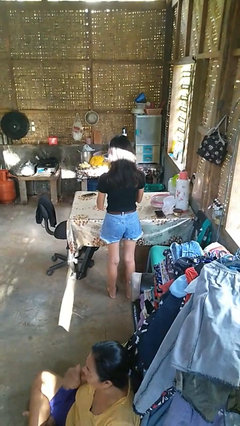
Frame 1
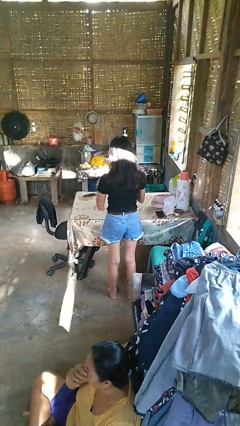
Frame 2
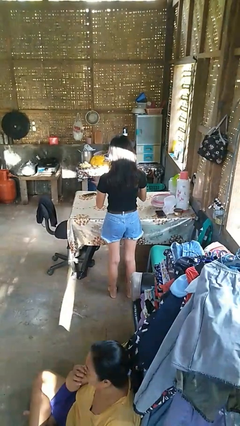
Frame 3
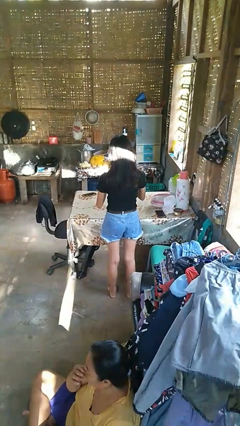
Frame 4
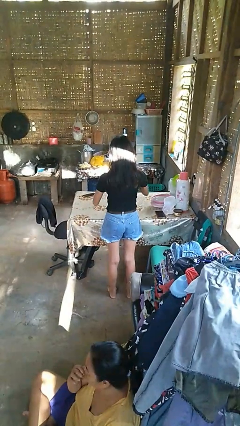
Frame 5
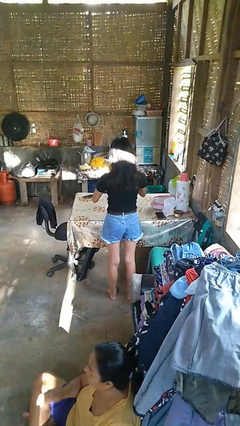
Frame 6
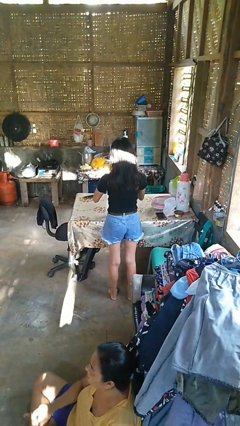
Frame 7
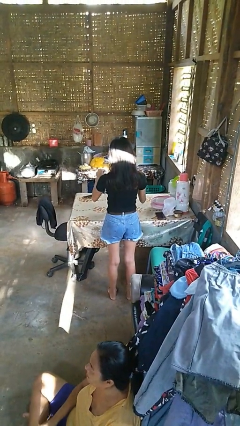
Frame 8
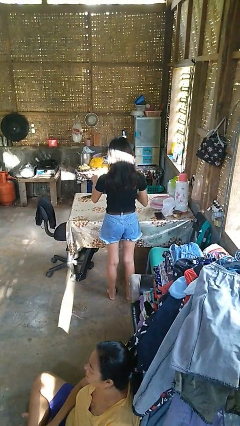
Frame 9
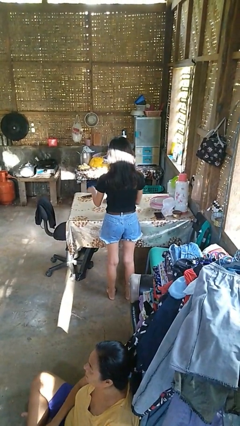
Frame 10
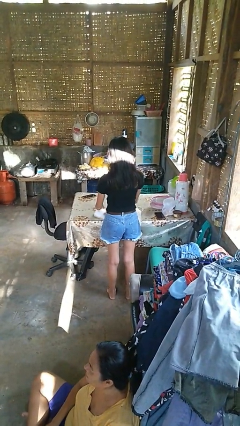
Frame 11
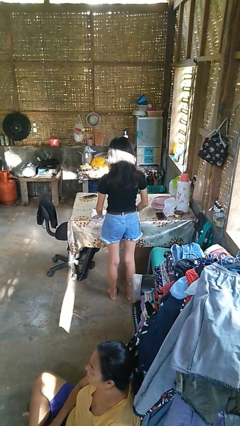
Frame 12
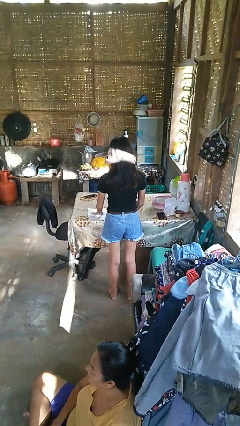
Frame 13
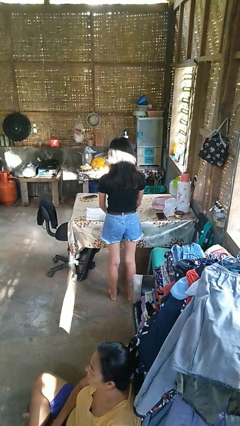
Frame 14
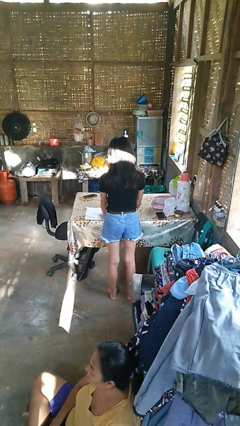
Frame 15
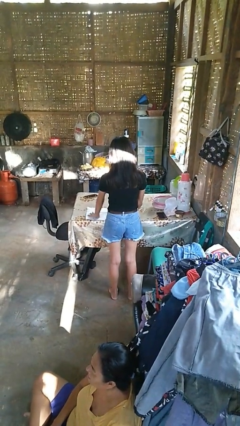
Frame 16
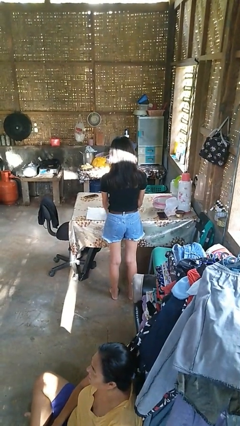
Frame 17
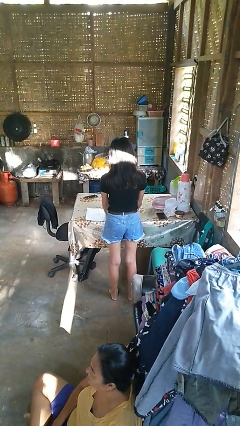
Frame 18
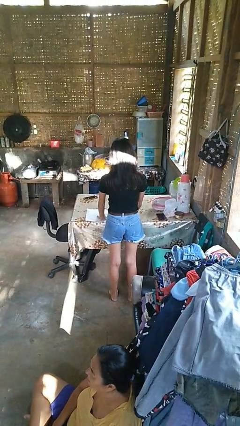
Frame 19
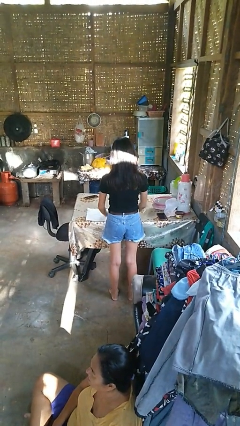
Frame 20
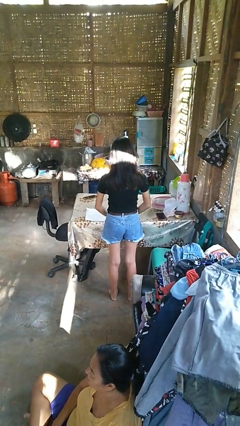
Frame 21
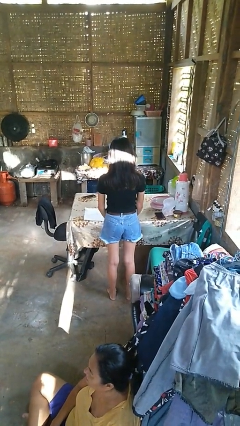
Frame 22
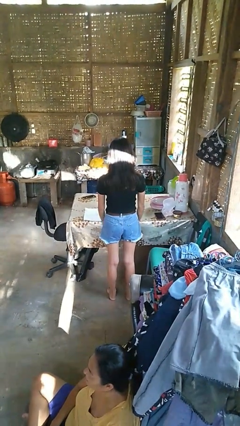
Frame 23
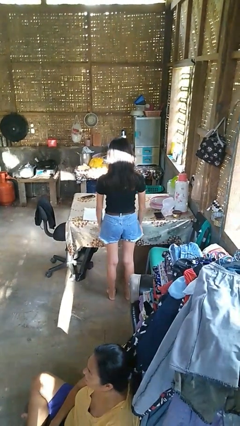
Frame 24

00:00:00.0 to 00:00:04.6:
person spreads tablecloth

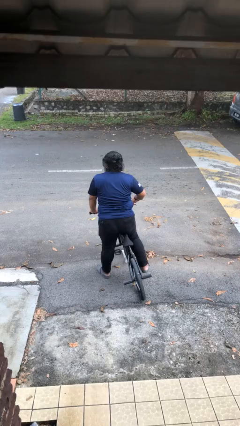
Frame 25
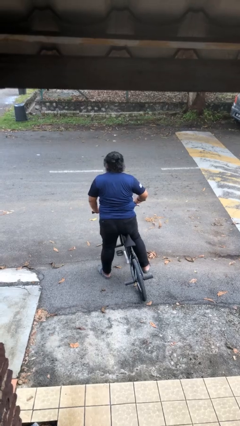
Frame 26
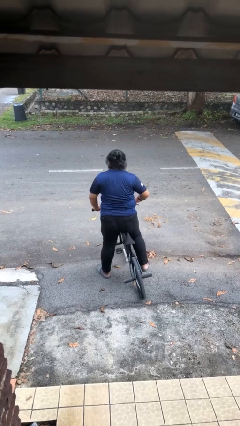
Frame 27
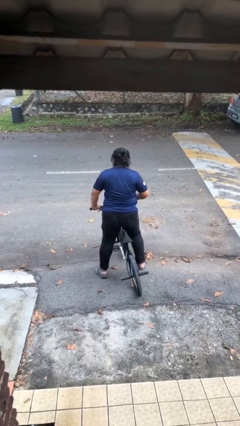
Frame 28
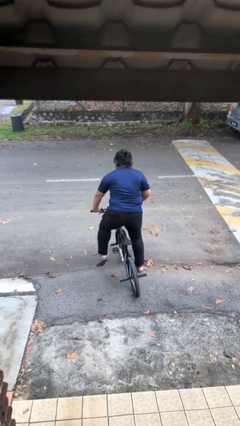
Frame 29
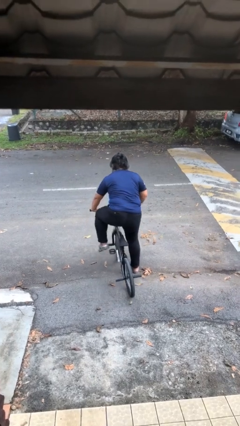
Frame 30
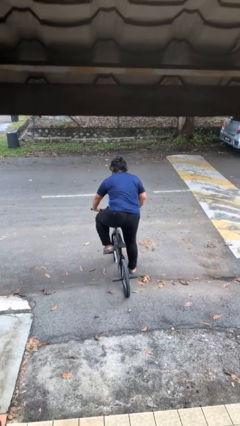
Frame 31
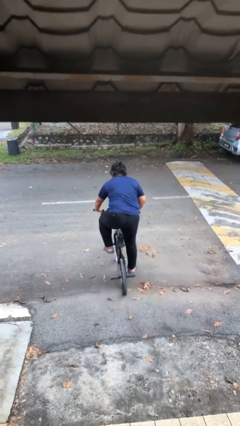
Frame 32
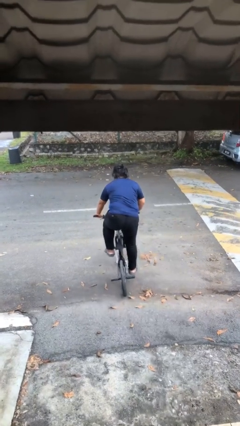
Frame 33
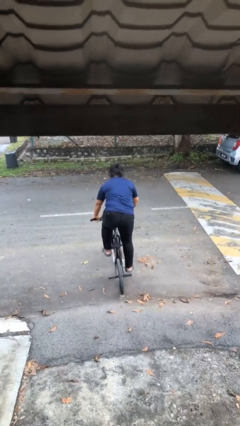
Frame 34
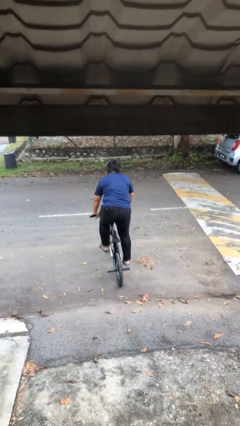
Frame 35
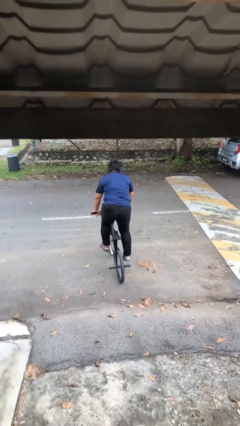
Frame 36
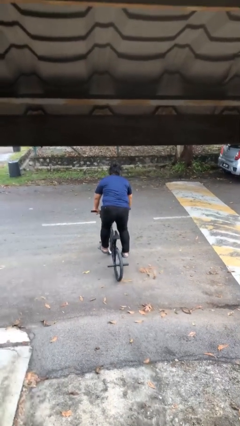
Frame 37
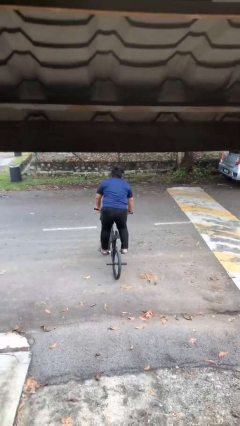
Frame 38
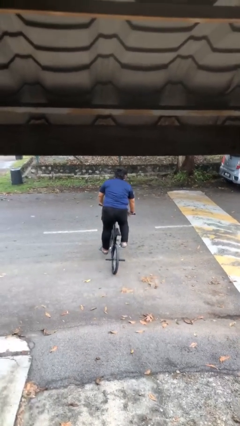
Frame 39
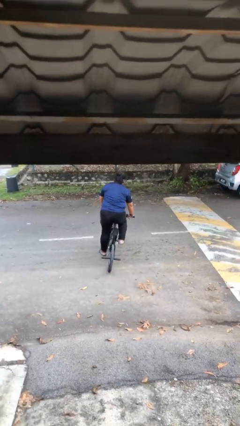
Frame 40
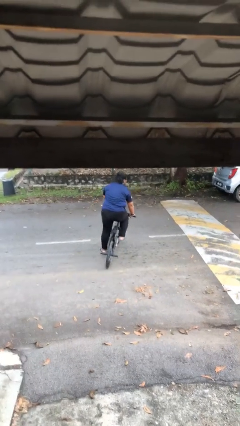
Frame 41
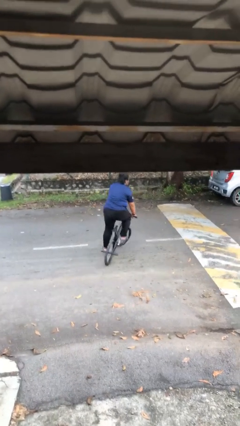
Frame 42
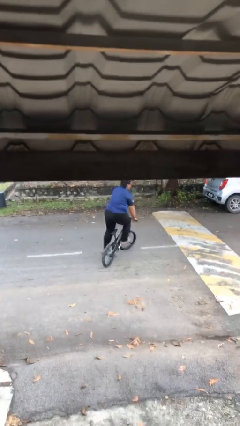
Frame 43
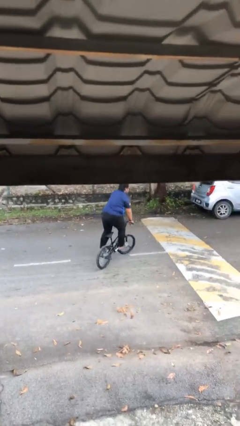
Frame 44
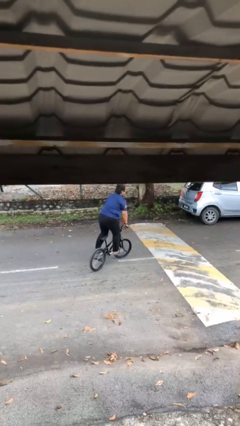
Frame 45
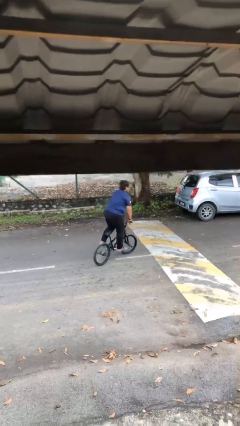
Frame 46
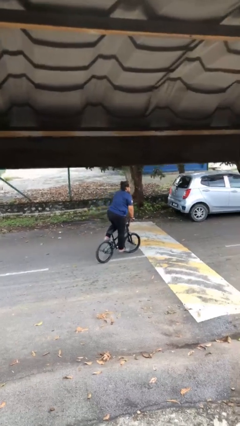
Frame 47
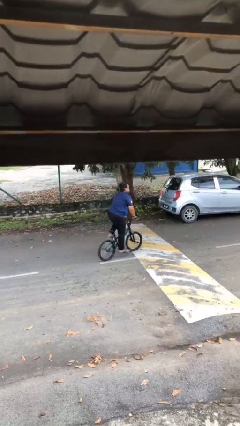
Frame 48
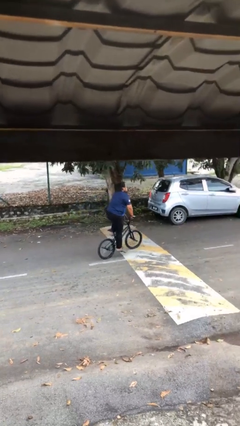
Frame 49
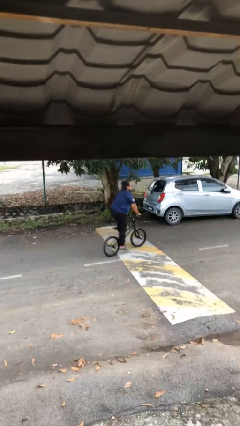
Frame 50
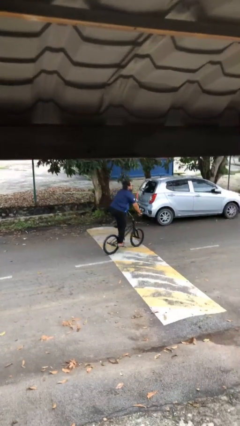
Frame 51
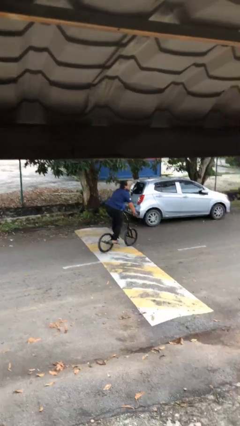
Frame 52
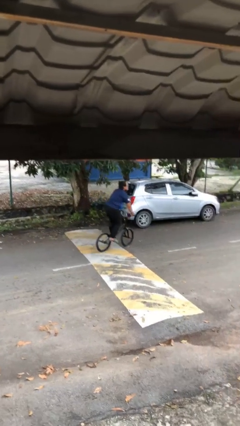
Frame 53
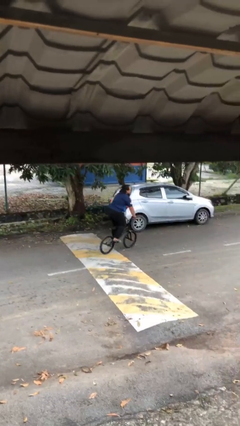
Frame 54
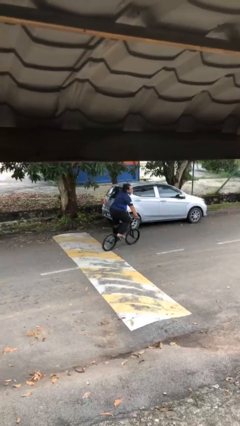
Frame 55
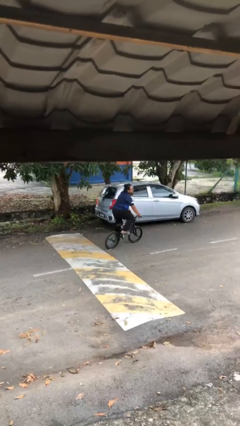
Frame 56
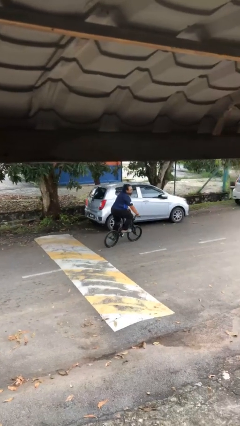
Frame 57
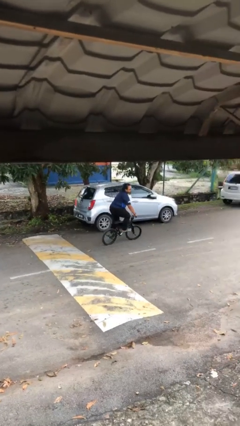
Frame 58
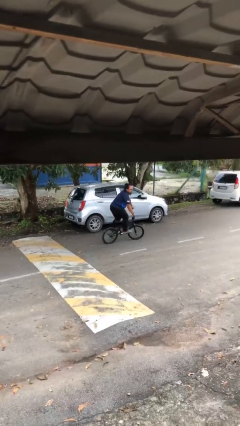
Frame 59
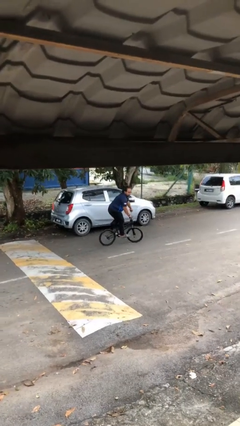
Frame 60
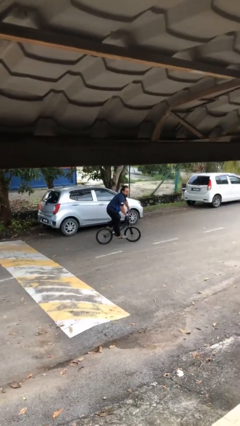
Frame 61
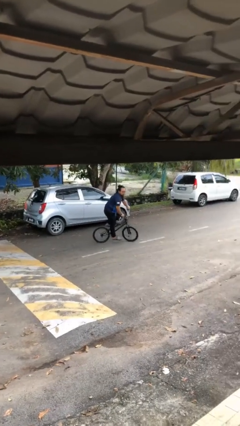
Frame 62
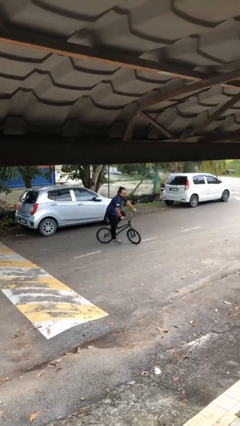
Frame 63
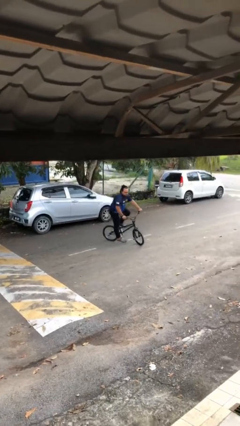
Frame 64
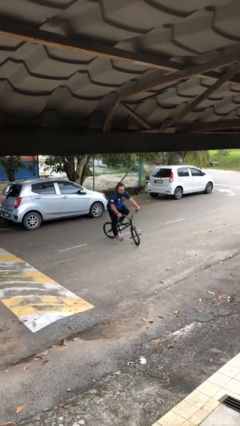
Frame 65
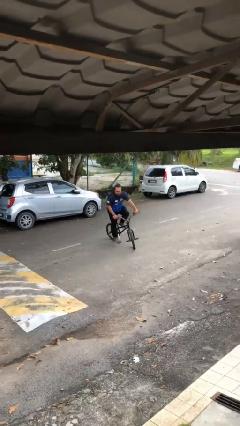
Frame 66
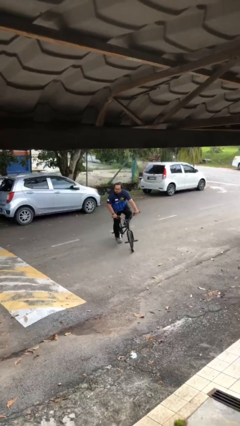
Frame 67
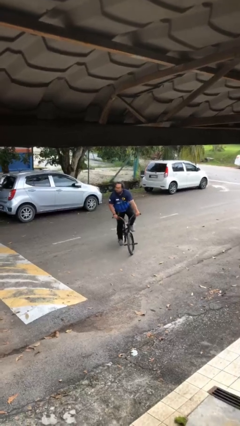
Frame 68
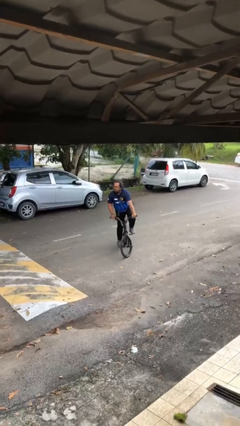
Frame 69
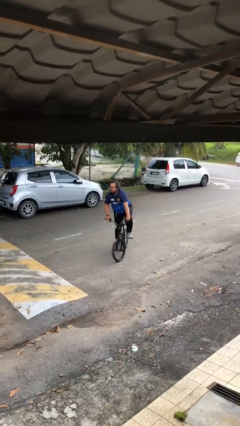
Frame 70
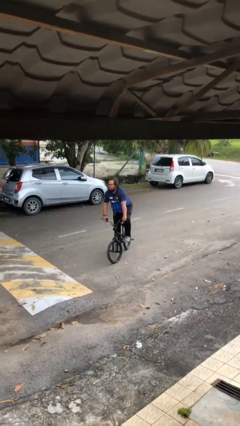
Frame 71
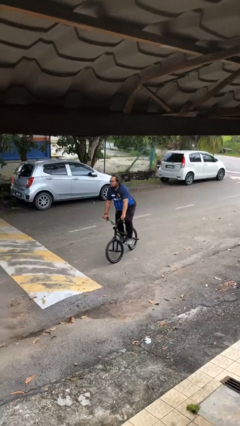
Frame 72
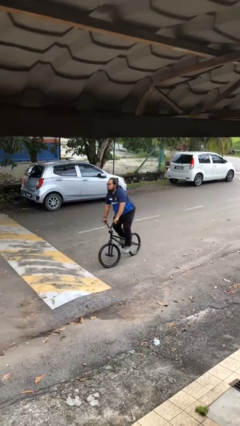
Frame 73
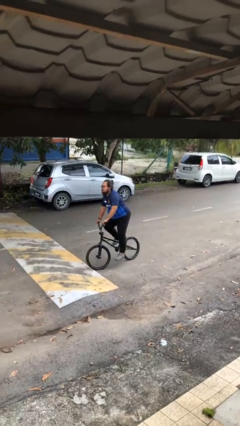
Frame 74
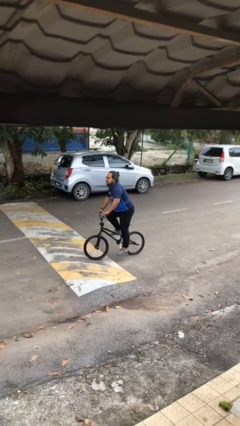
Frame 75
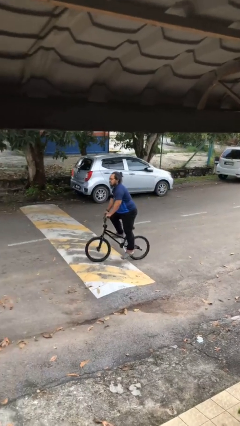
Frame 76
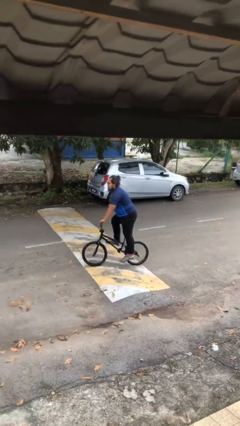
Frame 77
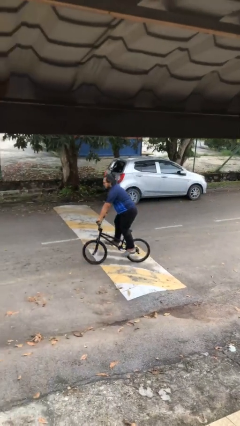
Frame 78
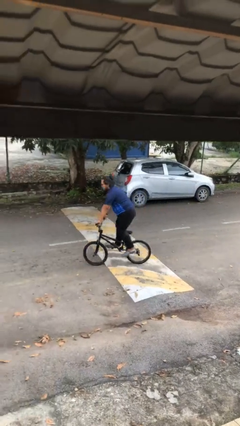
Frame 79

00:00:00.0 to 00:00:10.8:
person rides bicycle

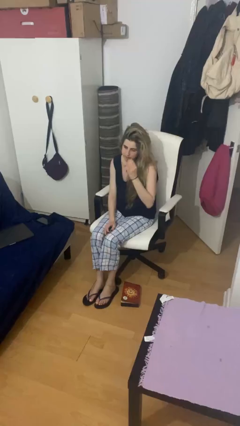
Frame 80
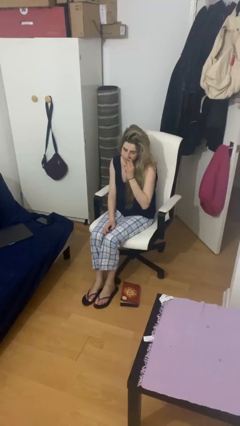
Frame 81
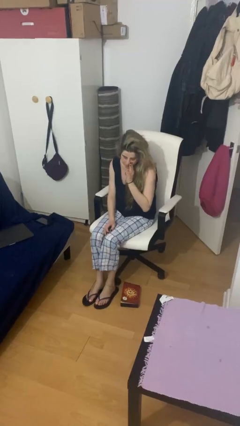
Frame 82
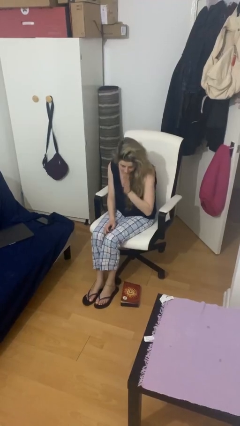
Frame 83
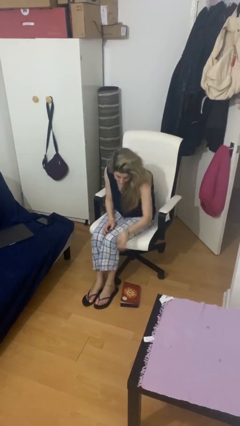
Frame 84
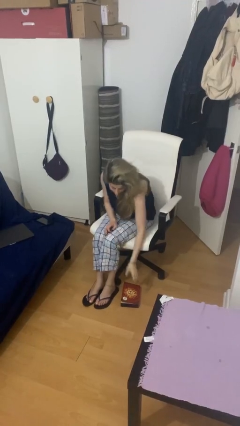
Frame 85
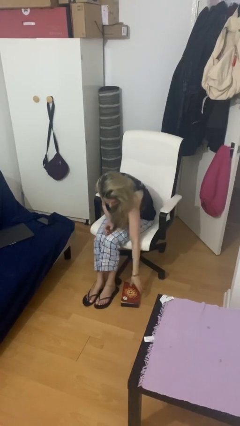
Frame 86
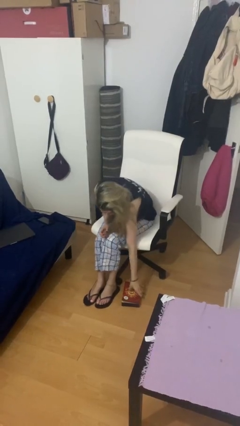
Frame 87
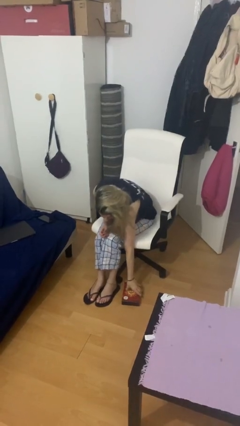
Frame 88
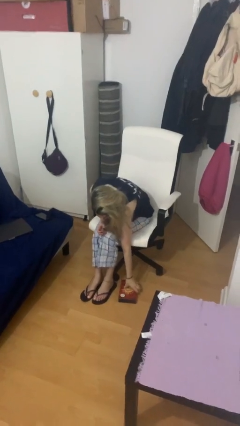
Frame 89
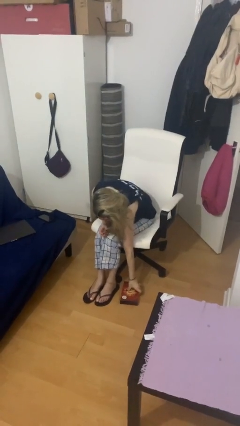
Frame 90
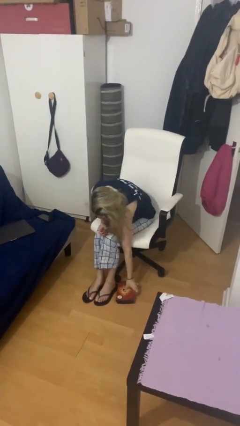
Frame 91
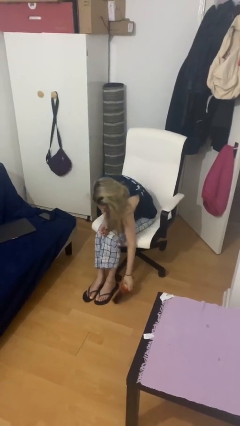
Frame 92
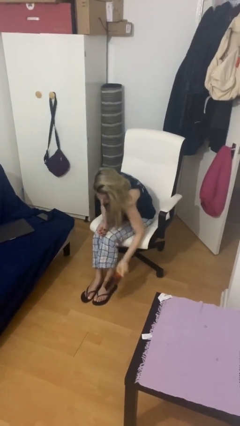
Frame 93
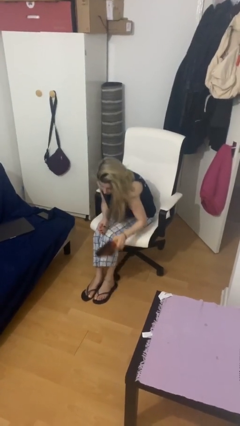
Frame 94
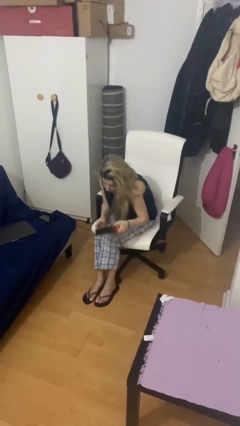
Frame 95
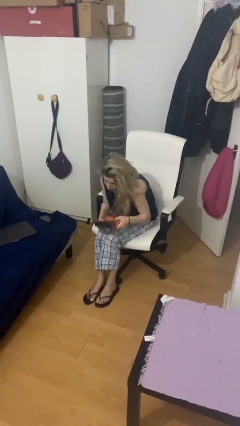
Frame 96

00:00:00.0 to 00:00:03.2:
person picks up object from floor
